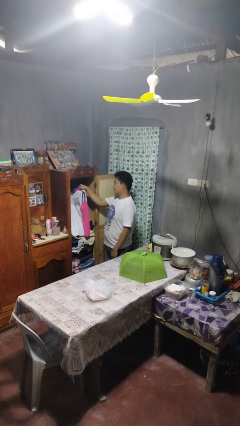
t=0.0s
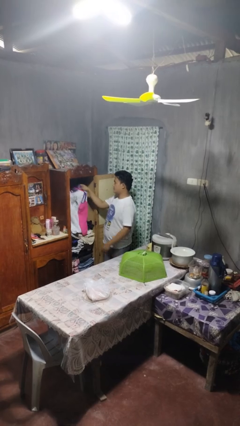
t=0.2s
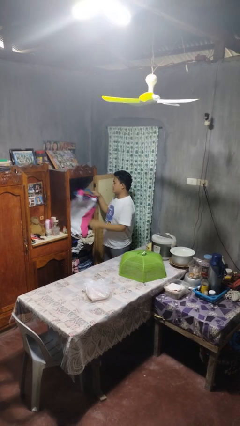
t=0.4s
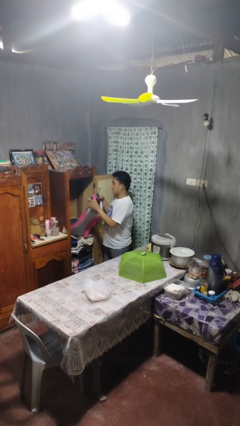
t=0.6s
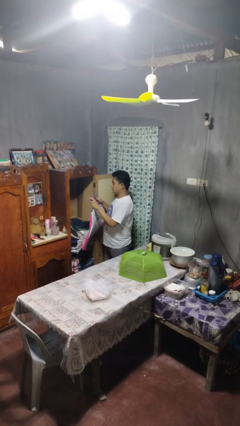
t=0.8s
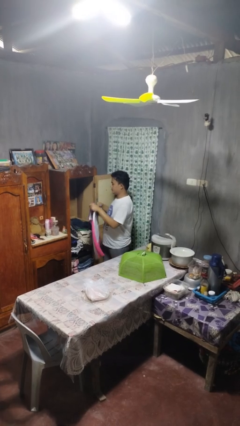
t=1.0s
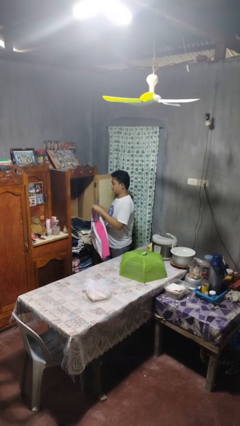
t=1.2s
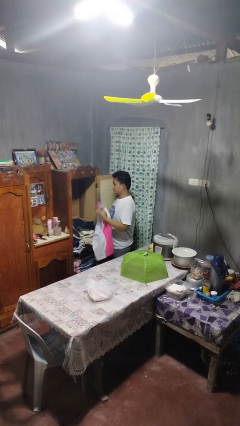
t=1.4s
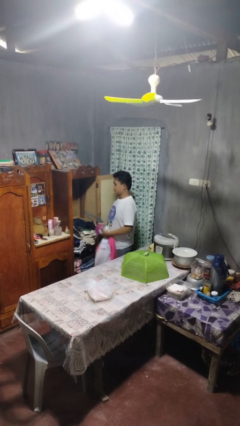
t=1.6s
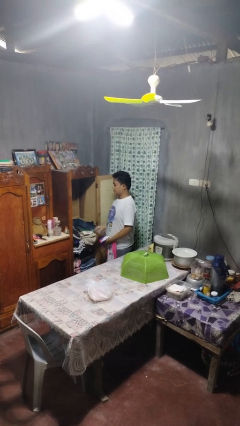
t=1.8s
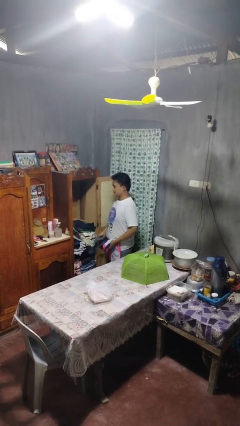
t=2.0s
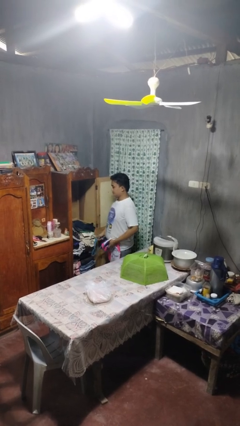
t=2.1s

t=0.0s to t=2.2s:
person takes clothes from closet

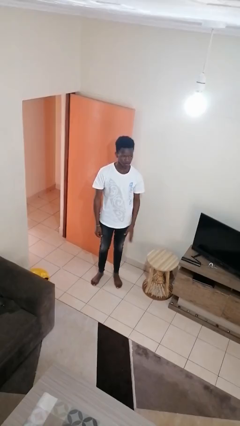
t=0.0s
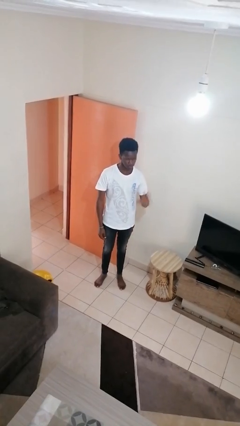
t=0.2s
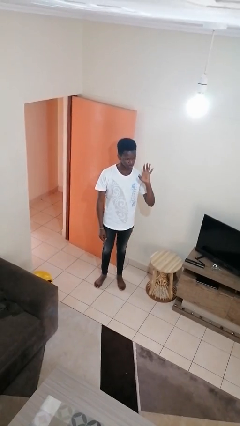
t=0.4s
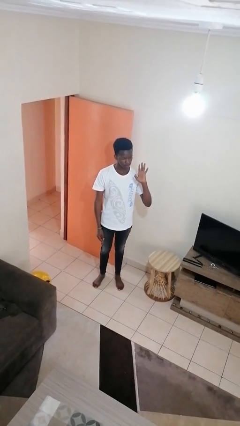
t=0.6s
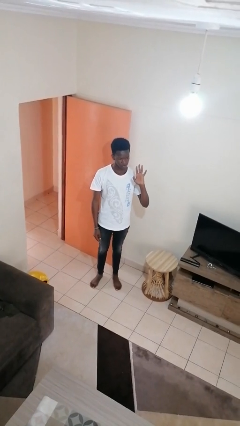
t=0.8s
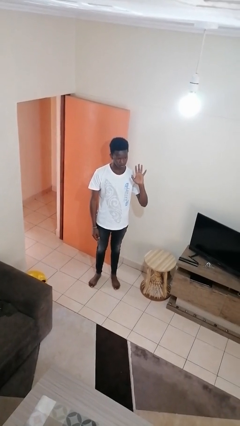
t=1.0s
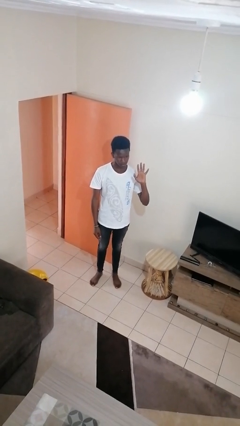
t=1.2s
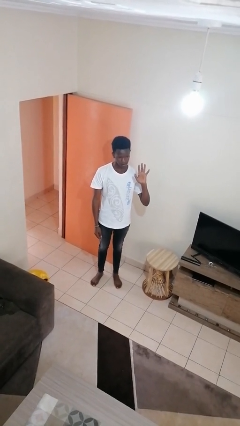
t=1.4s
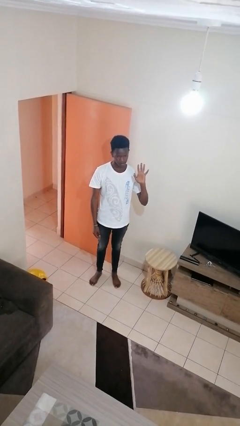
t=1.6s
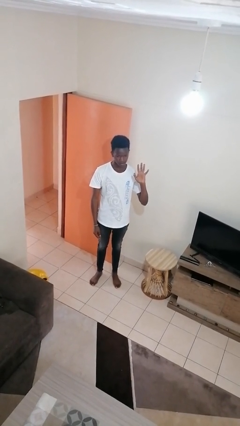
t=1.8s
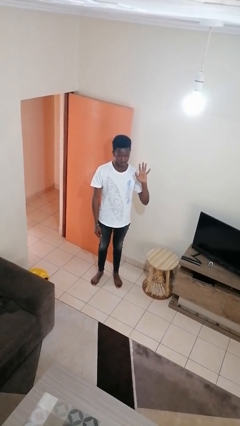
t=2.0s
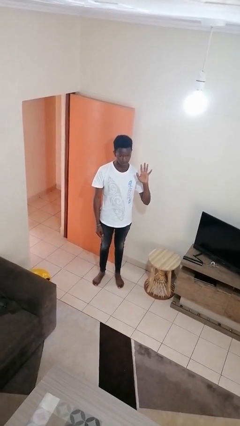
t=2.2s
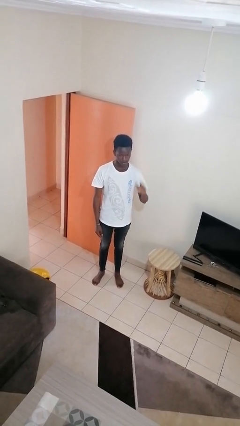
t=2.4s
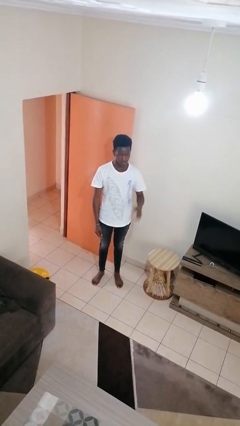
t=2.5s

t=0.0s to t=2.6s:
person gestures number five

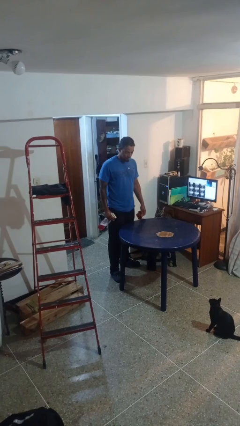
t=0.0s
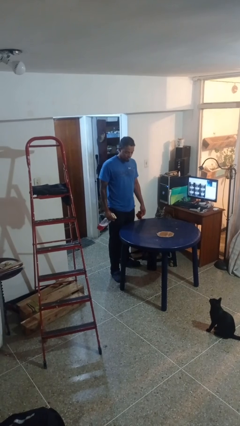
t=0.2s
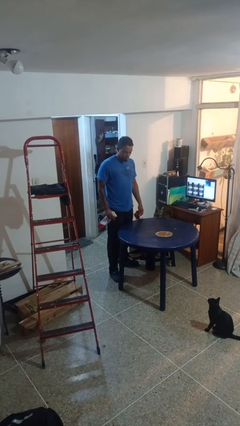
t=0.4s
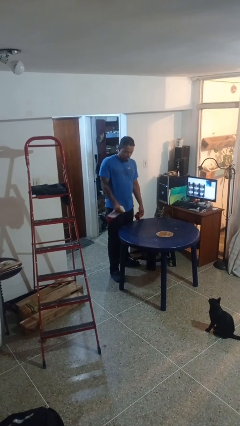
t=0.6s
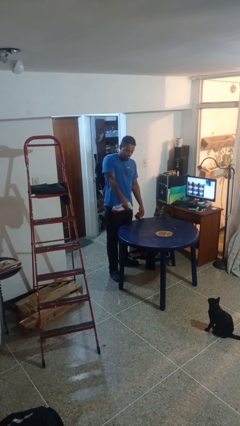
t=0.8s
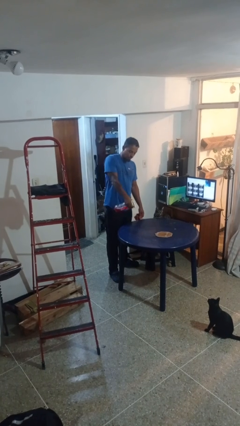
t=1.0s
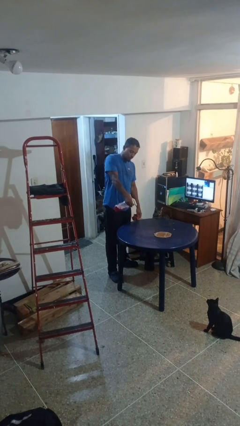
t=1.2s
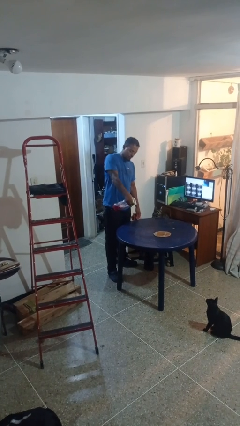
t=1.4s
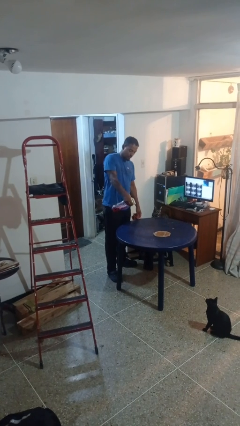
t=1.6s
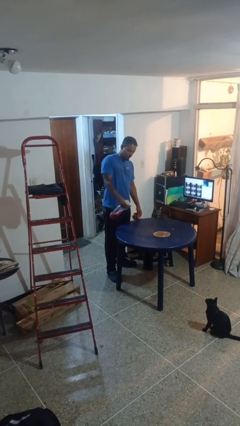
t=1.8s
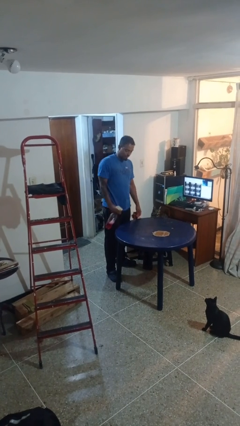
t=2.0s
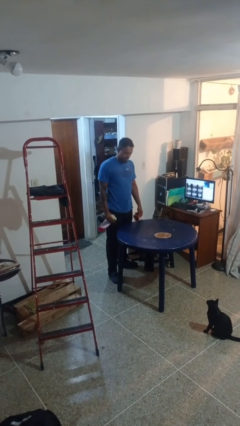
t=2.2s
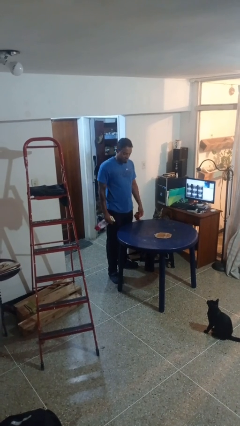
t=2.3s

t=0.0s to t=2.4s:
person sprays from bottle

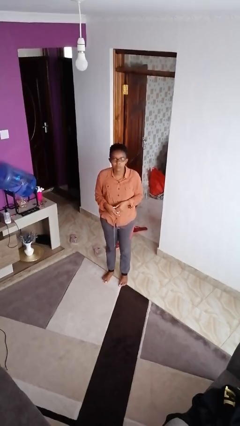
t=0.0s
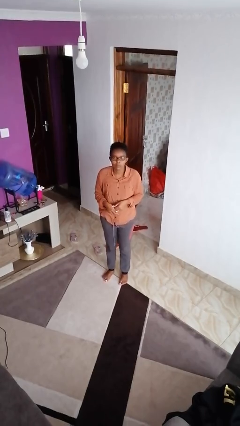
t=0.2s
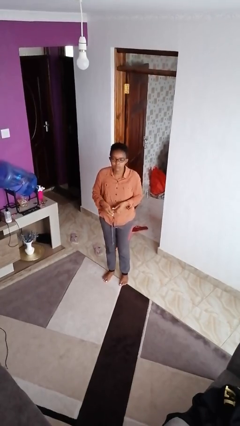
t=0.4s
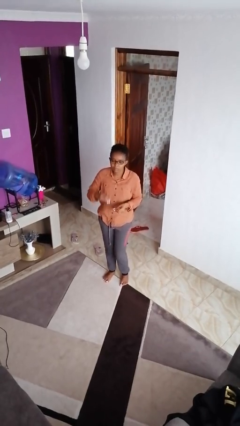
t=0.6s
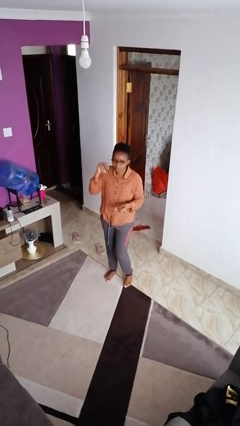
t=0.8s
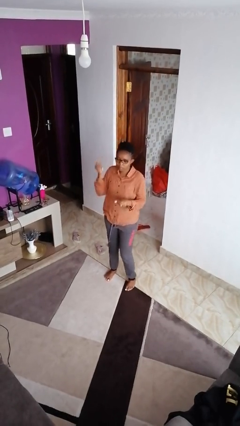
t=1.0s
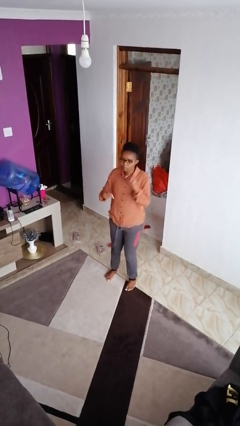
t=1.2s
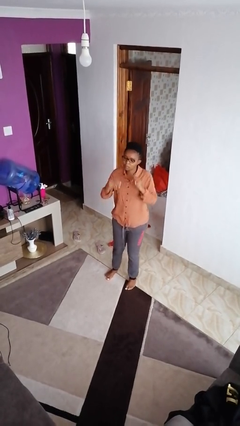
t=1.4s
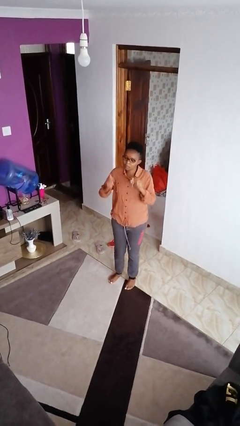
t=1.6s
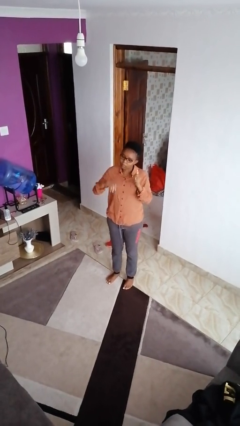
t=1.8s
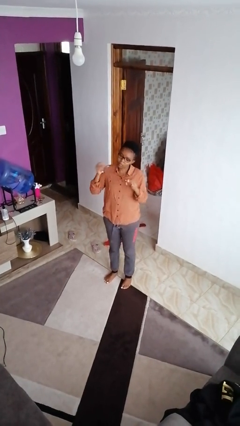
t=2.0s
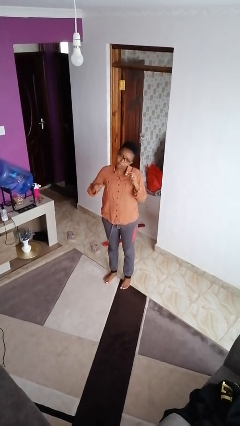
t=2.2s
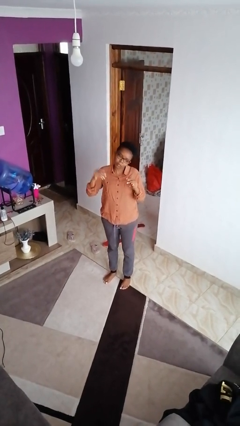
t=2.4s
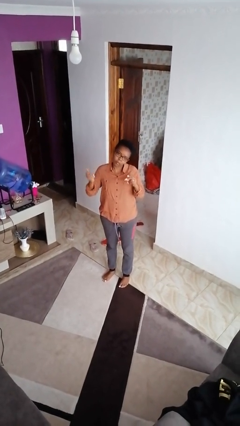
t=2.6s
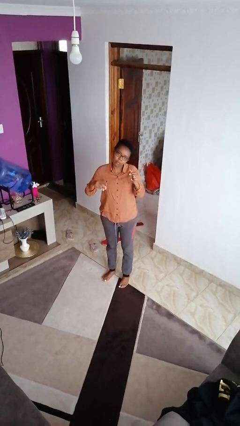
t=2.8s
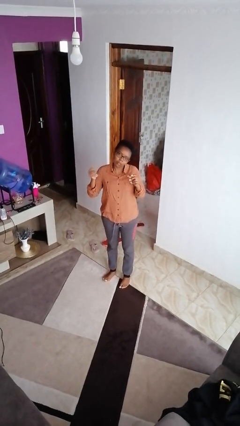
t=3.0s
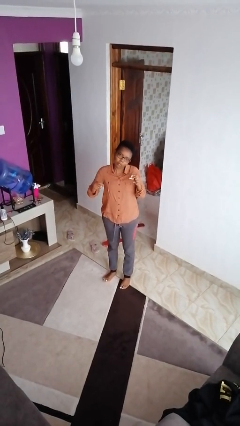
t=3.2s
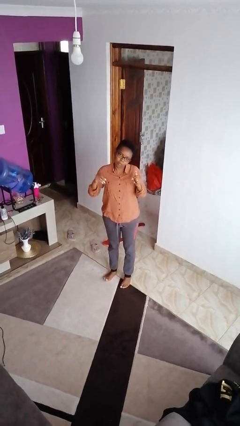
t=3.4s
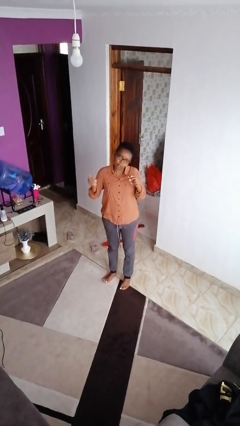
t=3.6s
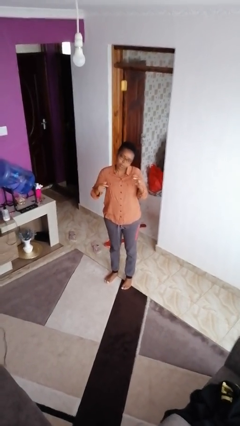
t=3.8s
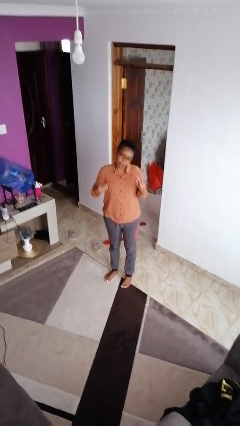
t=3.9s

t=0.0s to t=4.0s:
person snaps fingers

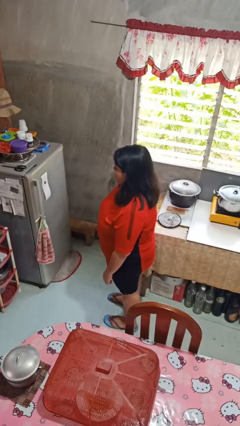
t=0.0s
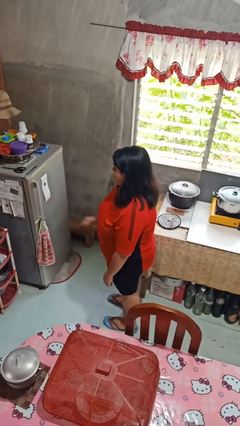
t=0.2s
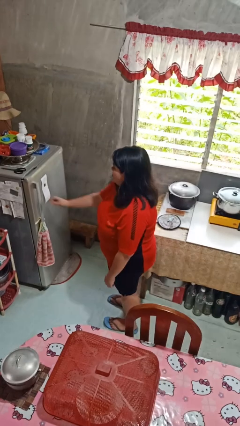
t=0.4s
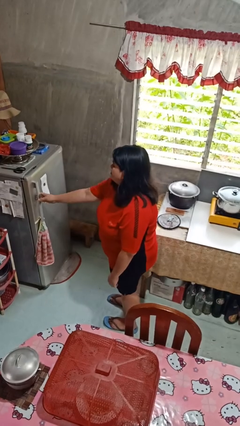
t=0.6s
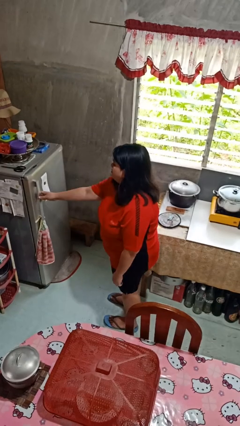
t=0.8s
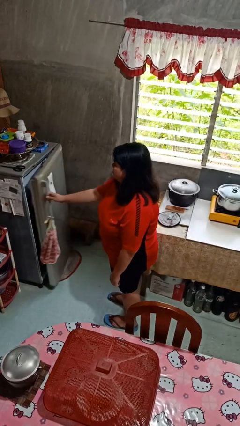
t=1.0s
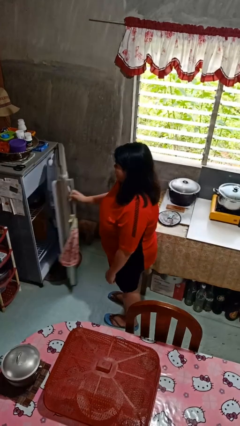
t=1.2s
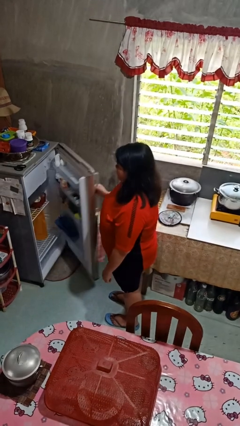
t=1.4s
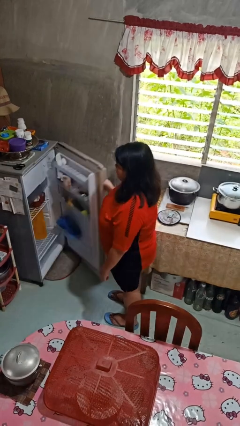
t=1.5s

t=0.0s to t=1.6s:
person opens refrigerator

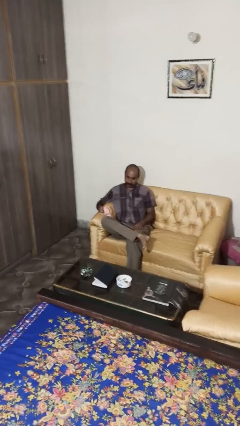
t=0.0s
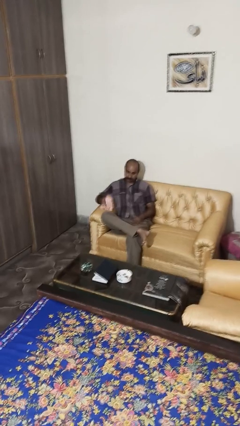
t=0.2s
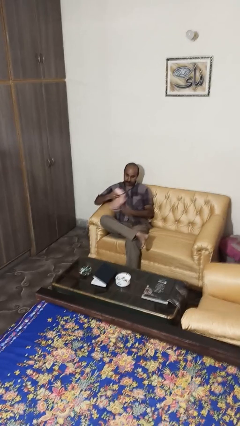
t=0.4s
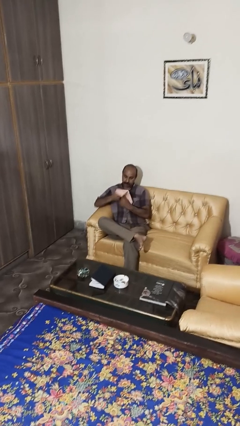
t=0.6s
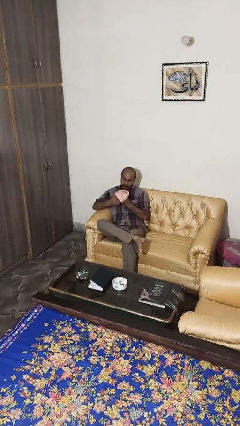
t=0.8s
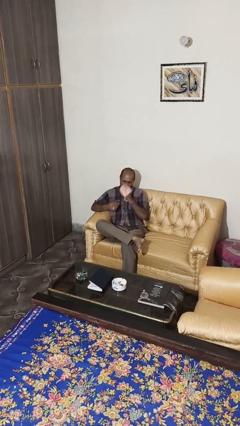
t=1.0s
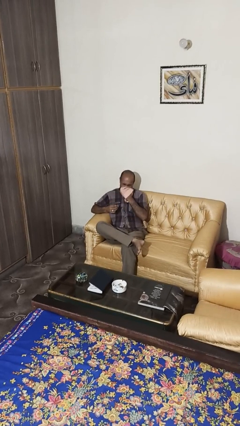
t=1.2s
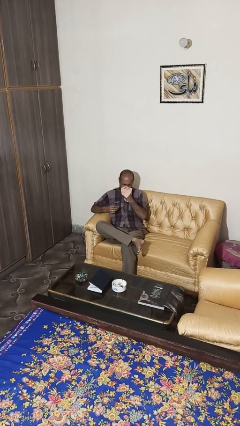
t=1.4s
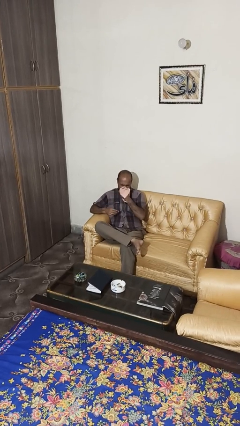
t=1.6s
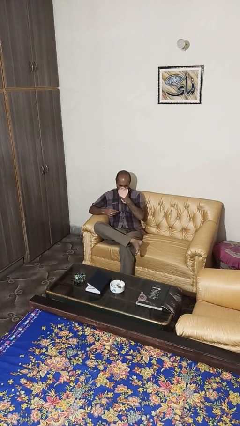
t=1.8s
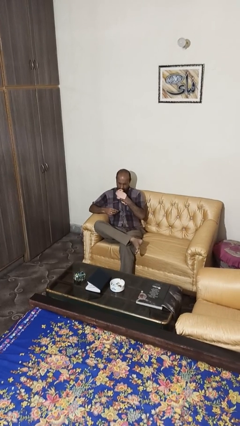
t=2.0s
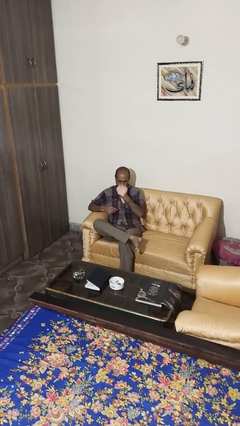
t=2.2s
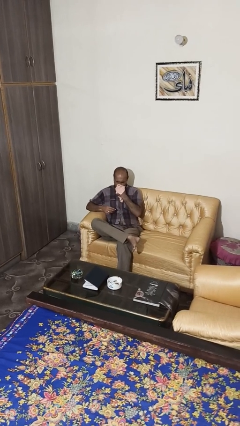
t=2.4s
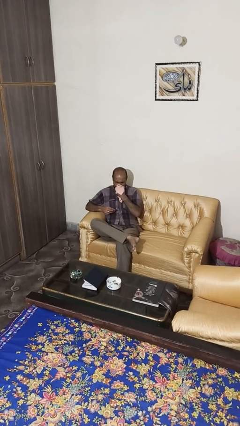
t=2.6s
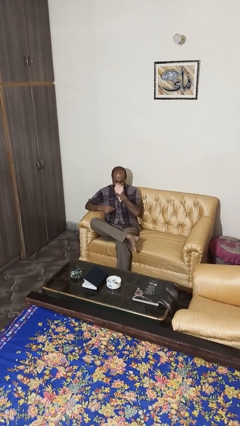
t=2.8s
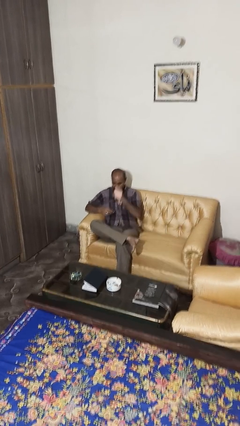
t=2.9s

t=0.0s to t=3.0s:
person blows nose

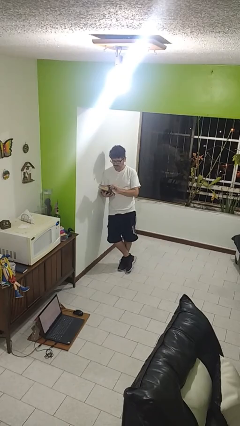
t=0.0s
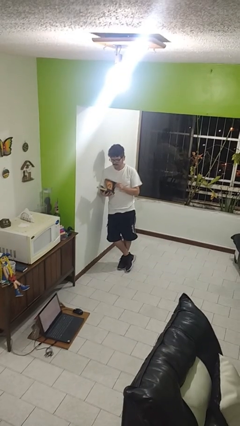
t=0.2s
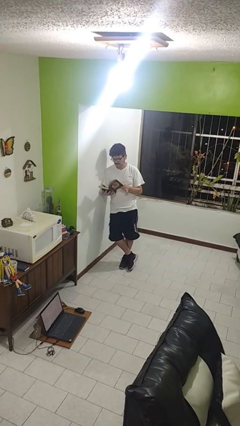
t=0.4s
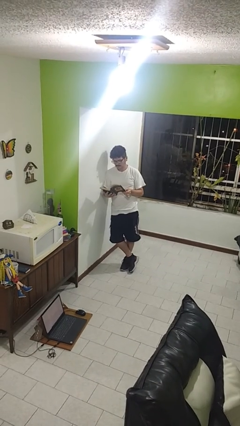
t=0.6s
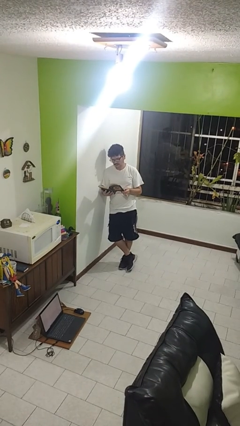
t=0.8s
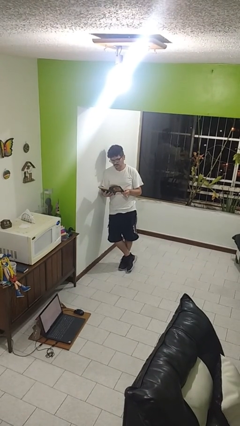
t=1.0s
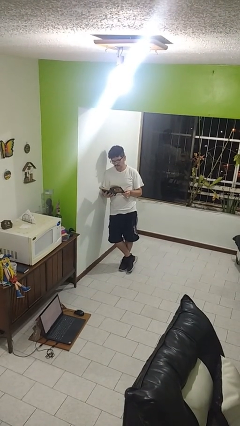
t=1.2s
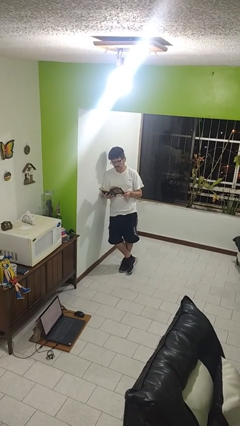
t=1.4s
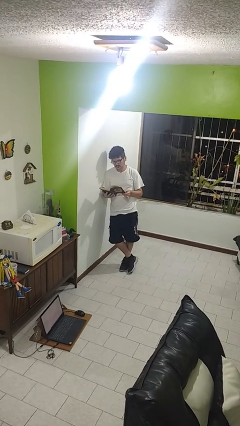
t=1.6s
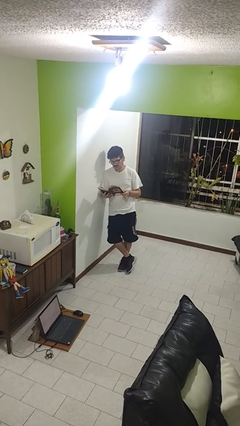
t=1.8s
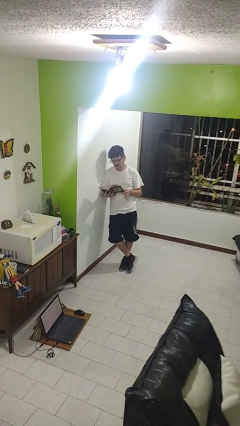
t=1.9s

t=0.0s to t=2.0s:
person reads book
